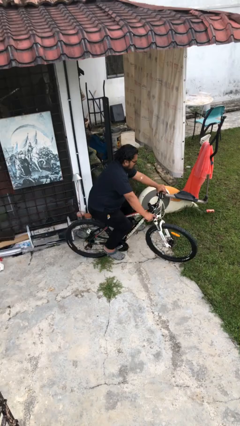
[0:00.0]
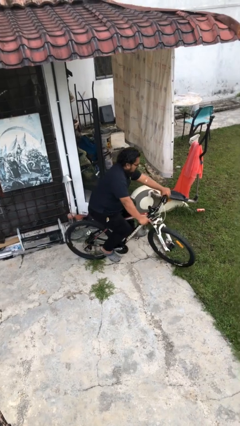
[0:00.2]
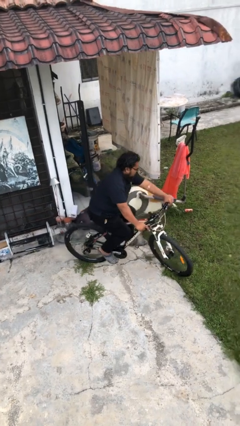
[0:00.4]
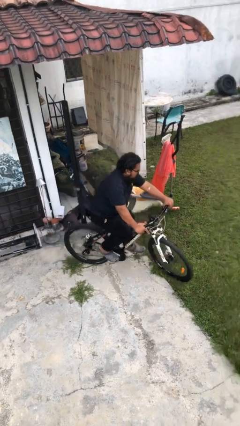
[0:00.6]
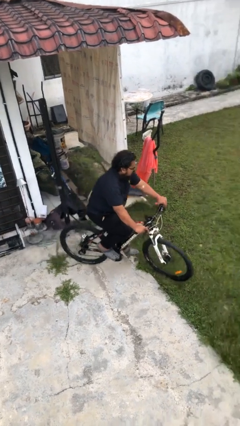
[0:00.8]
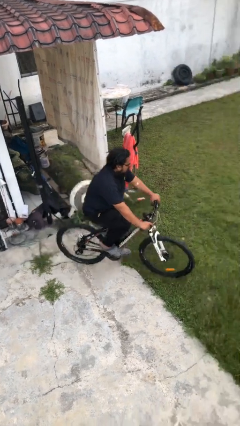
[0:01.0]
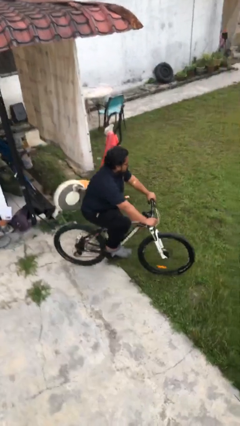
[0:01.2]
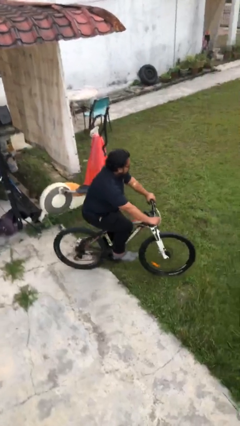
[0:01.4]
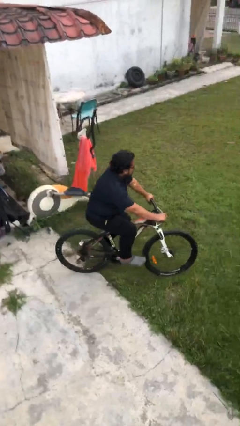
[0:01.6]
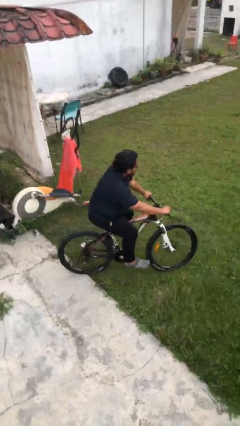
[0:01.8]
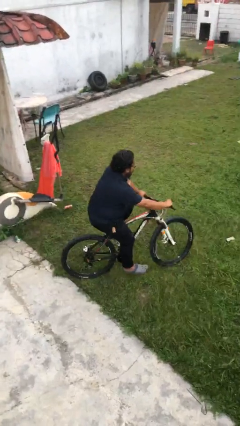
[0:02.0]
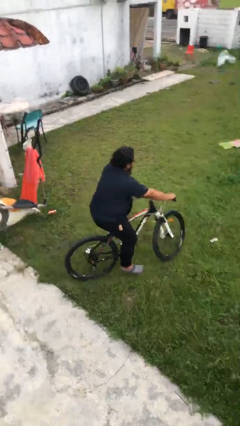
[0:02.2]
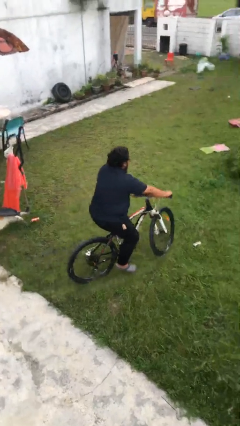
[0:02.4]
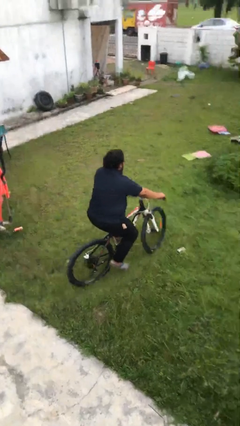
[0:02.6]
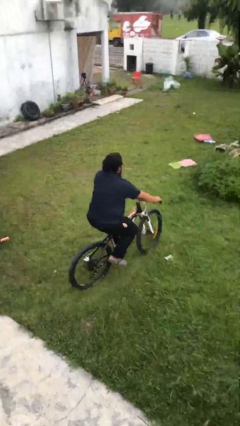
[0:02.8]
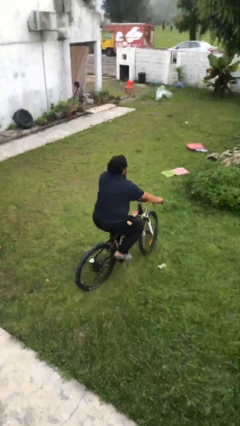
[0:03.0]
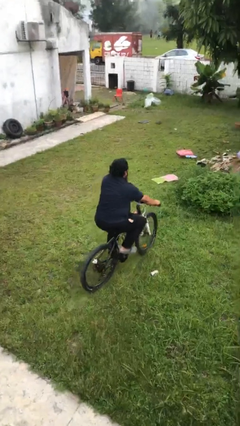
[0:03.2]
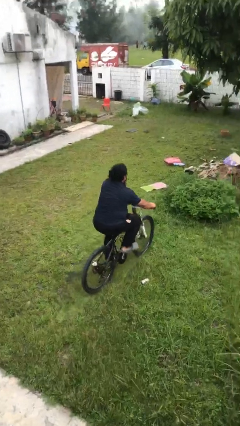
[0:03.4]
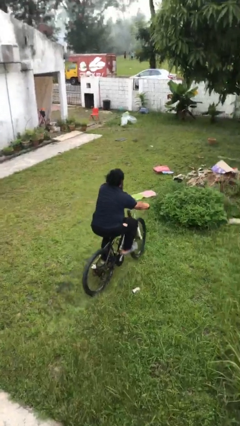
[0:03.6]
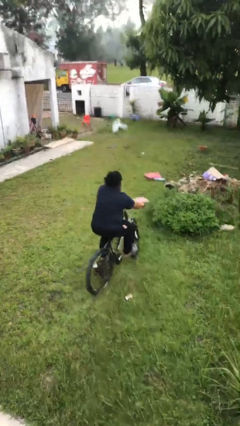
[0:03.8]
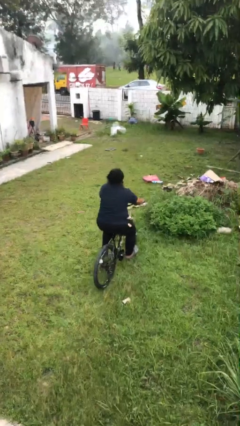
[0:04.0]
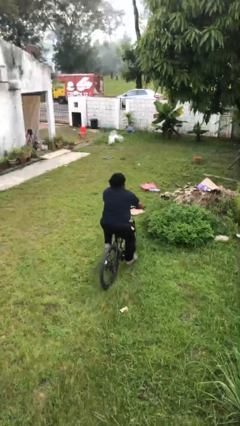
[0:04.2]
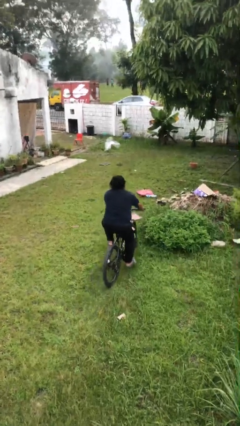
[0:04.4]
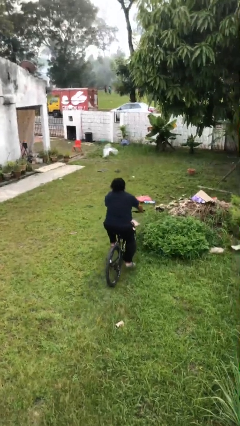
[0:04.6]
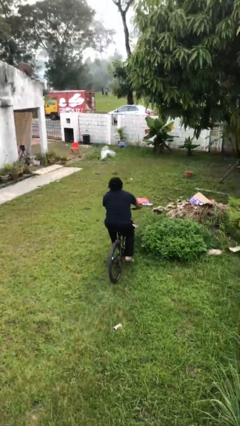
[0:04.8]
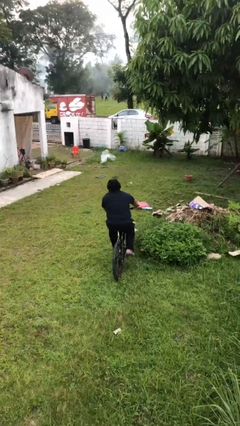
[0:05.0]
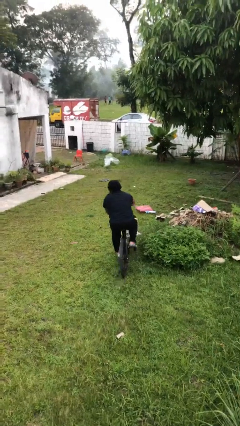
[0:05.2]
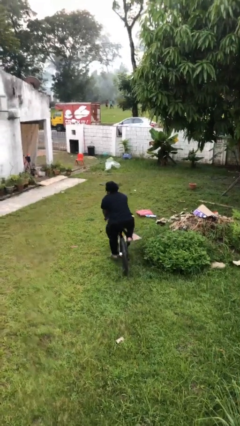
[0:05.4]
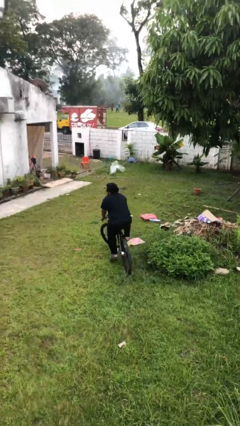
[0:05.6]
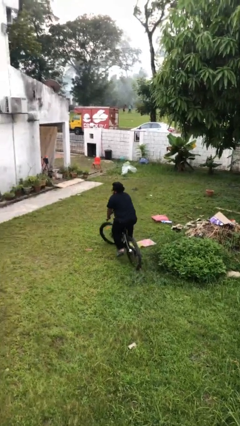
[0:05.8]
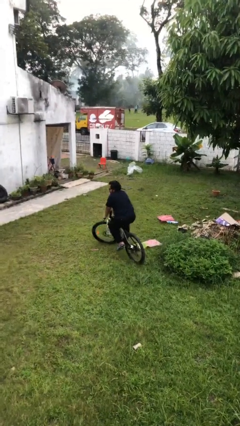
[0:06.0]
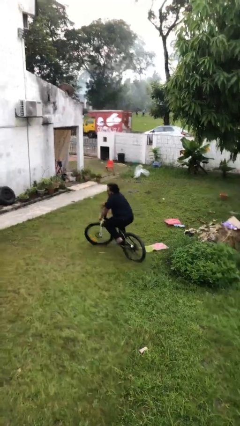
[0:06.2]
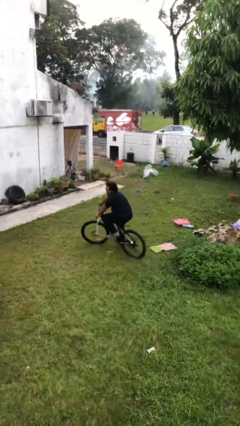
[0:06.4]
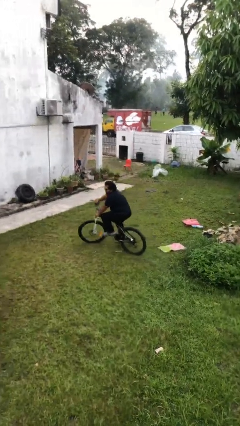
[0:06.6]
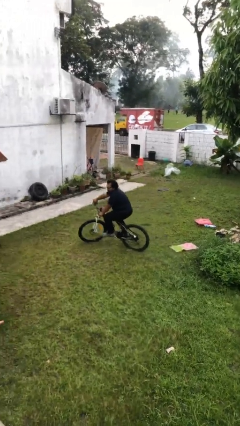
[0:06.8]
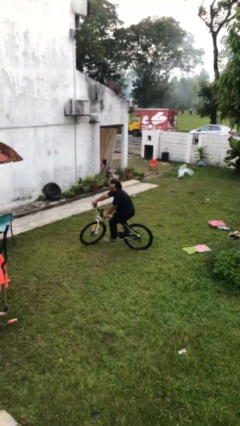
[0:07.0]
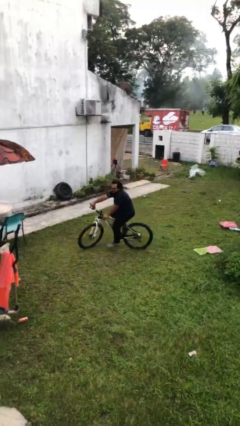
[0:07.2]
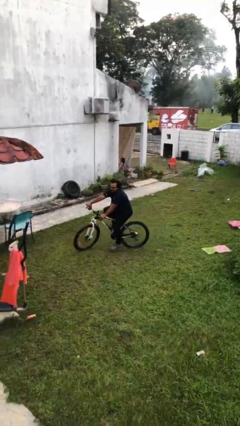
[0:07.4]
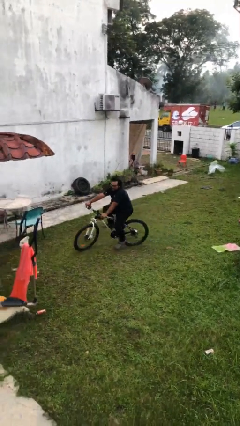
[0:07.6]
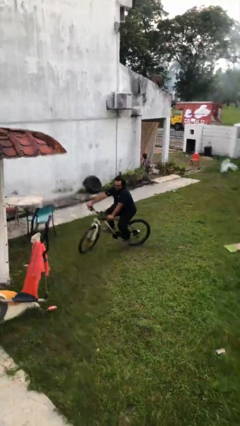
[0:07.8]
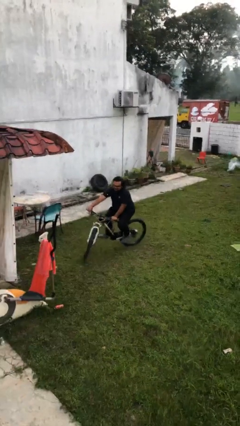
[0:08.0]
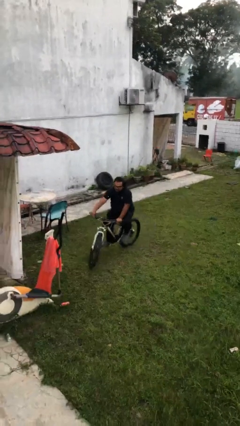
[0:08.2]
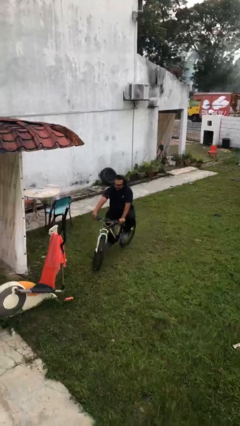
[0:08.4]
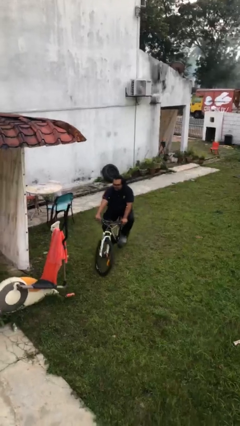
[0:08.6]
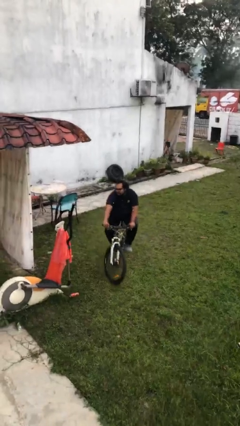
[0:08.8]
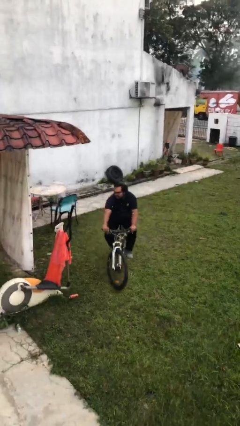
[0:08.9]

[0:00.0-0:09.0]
person rides bicycle

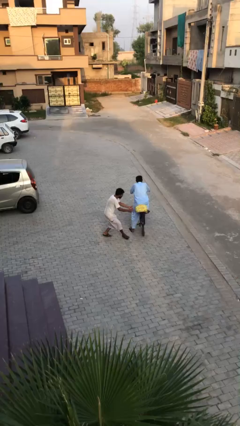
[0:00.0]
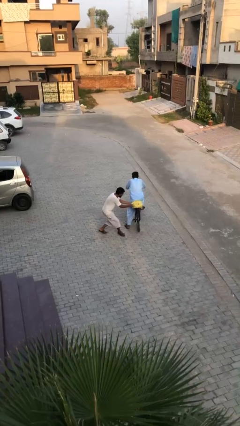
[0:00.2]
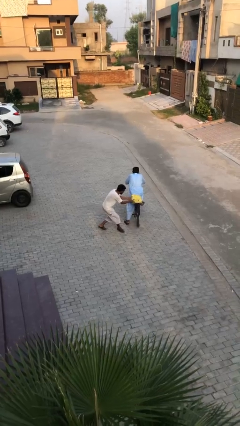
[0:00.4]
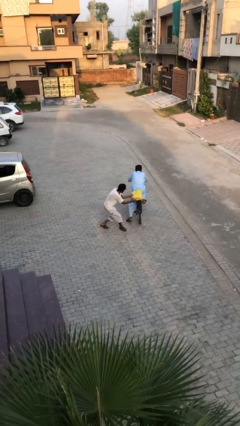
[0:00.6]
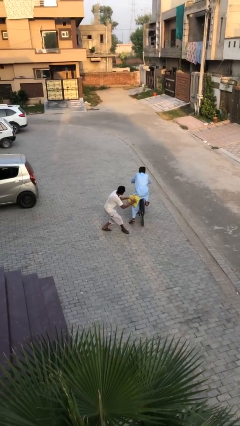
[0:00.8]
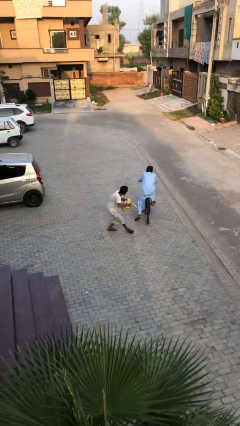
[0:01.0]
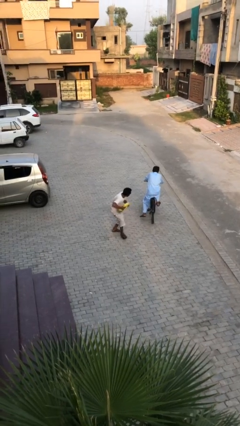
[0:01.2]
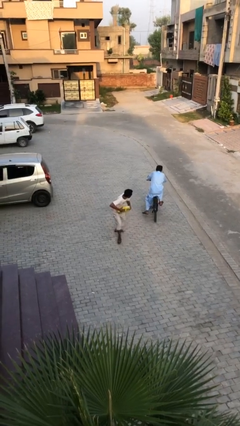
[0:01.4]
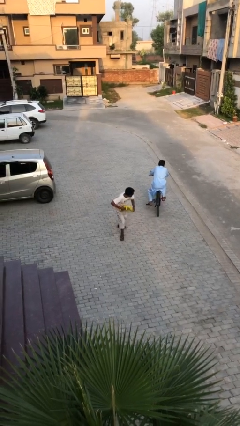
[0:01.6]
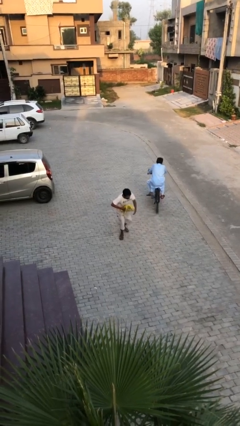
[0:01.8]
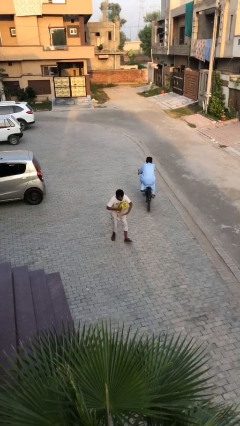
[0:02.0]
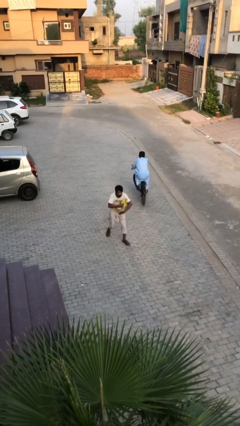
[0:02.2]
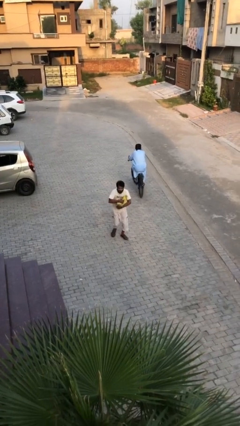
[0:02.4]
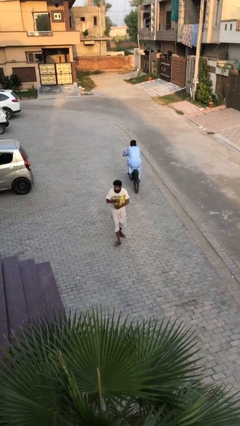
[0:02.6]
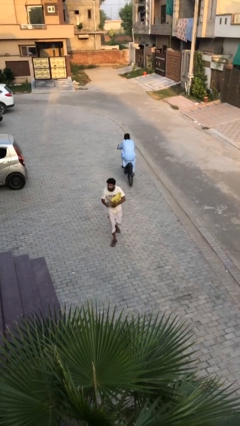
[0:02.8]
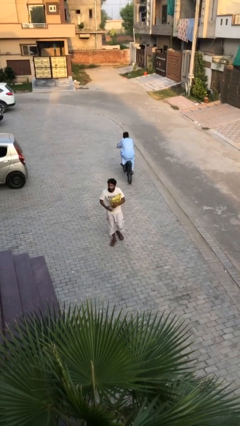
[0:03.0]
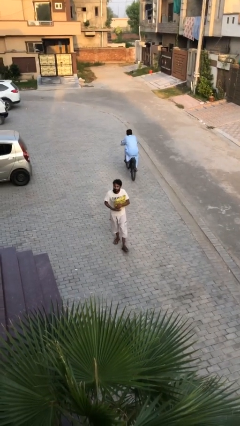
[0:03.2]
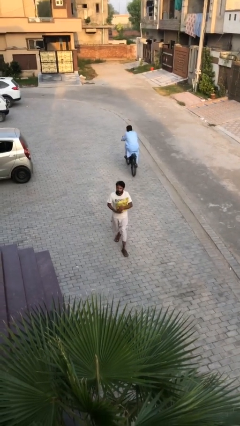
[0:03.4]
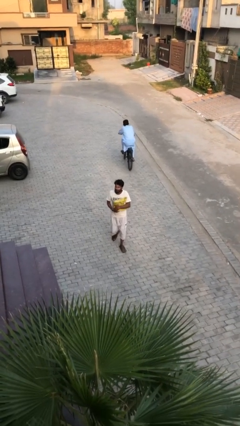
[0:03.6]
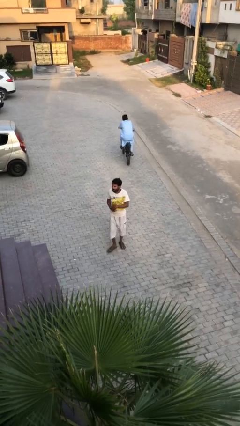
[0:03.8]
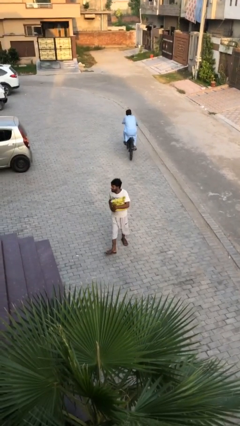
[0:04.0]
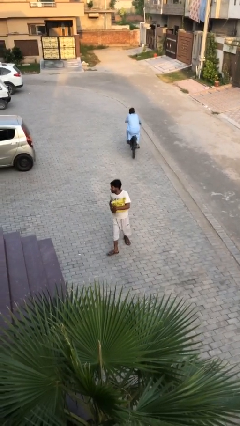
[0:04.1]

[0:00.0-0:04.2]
person steals object from person

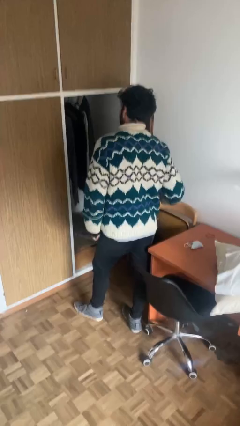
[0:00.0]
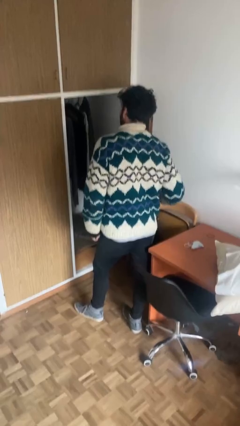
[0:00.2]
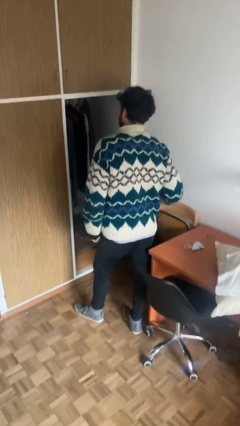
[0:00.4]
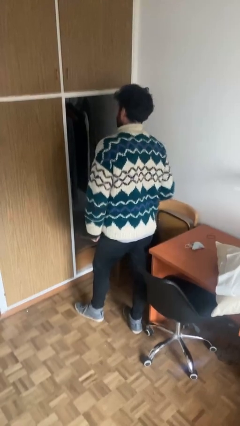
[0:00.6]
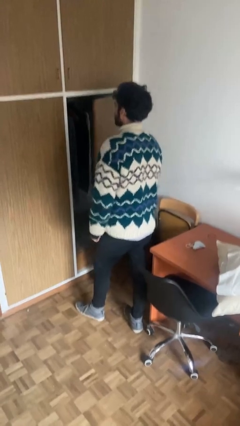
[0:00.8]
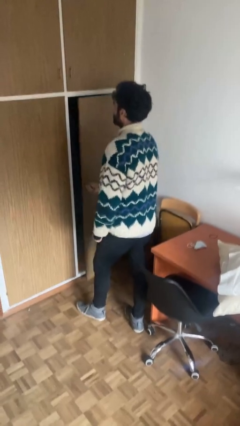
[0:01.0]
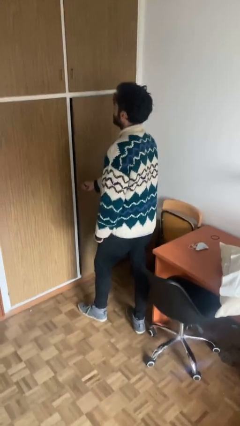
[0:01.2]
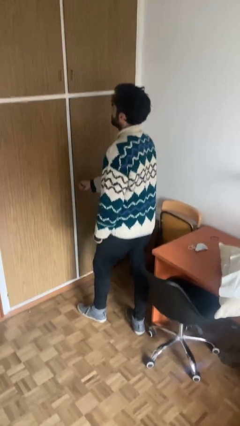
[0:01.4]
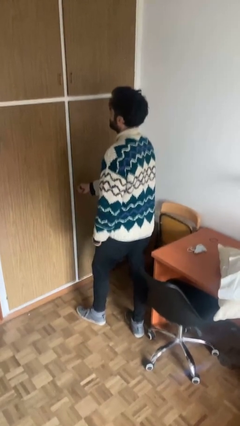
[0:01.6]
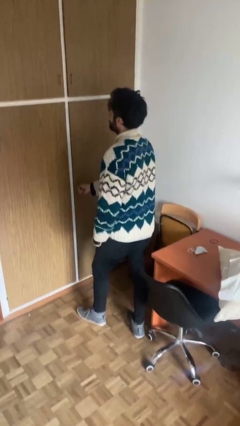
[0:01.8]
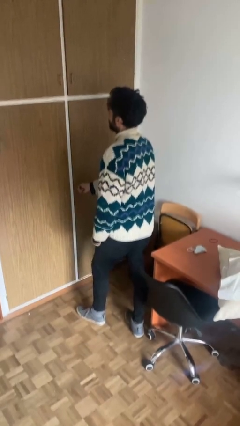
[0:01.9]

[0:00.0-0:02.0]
person closes closet door

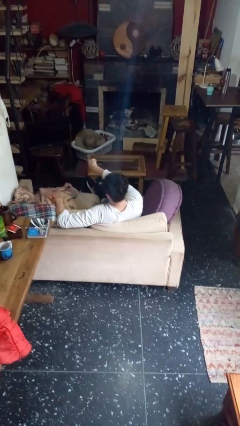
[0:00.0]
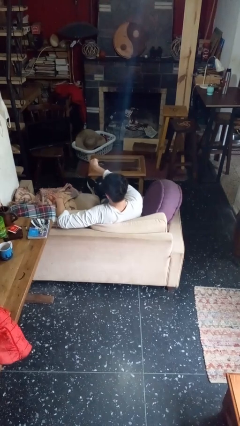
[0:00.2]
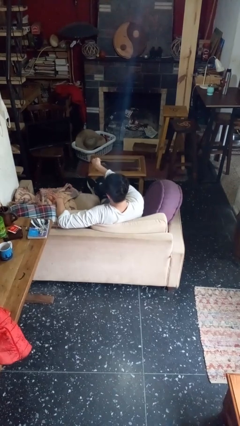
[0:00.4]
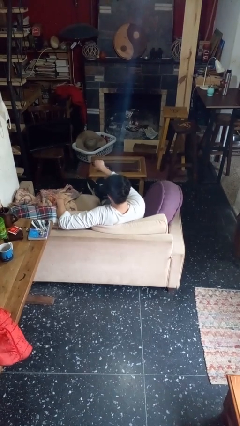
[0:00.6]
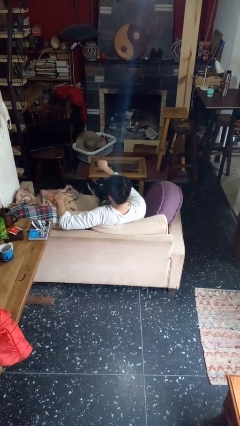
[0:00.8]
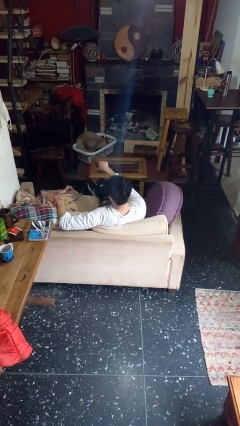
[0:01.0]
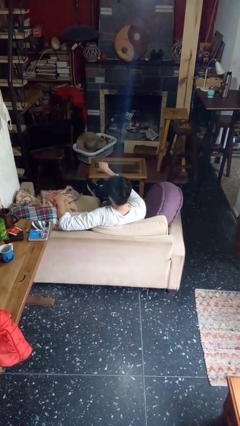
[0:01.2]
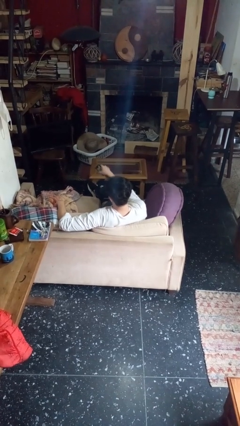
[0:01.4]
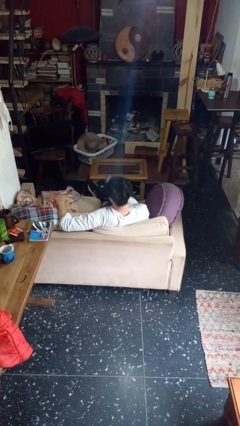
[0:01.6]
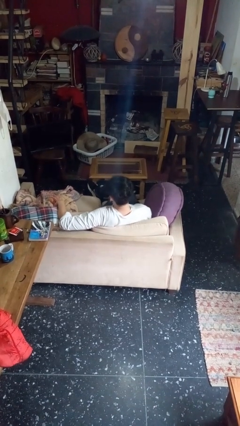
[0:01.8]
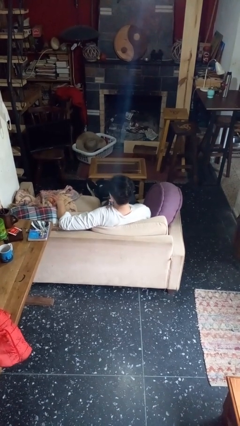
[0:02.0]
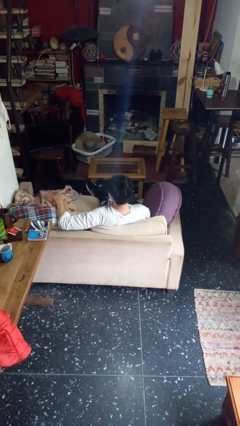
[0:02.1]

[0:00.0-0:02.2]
person uses television remote

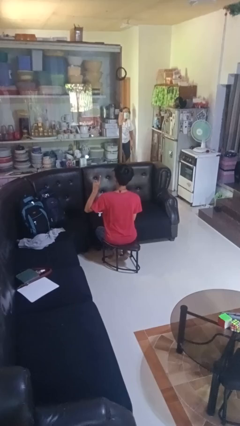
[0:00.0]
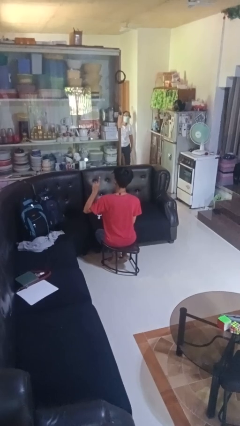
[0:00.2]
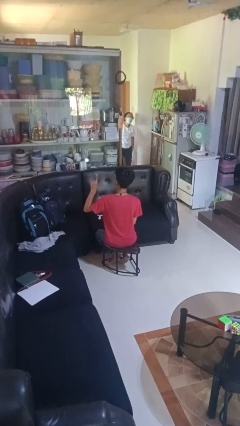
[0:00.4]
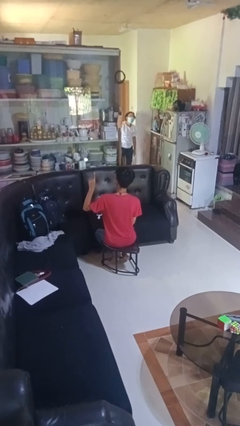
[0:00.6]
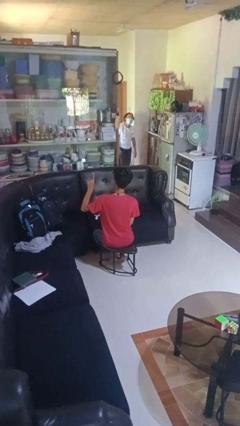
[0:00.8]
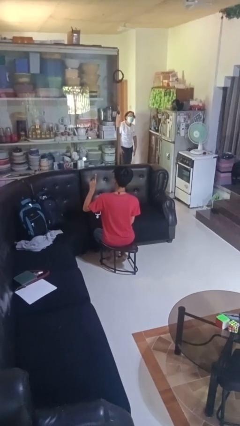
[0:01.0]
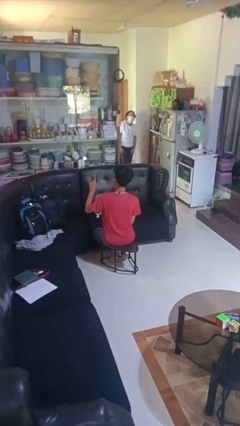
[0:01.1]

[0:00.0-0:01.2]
person gestures number one
